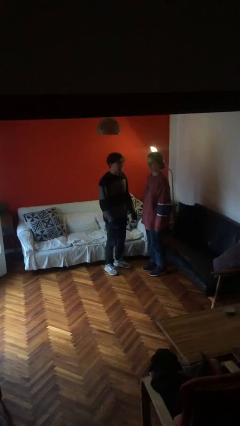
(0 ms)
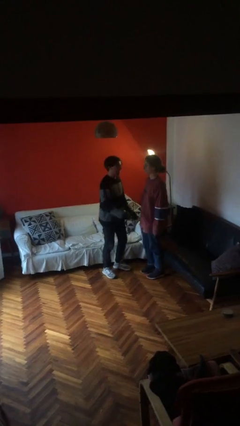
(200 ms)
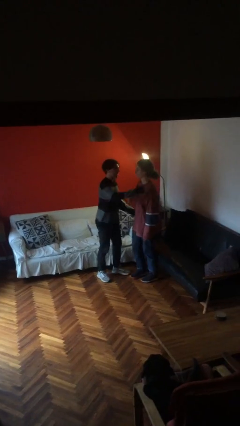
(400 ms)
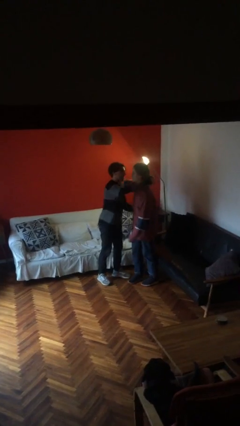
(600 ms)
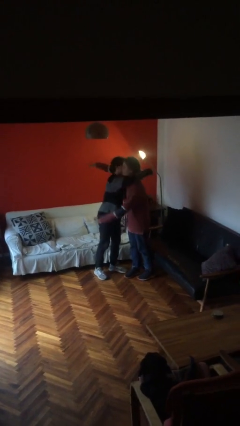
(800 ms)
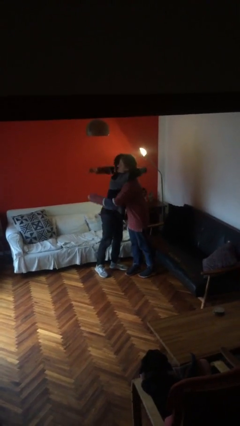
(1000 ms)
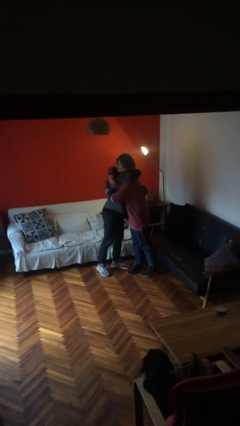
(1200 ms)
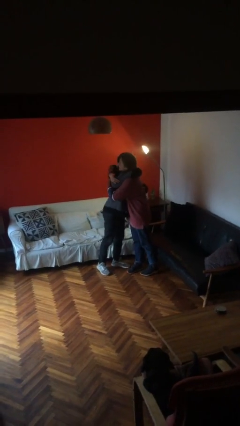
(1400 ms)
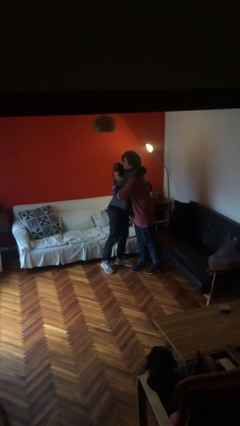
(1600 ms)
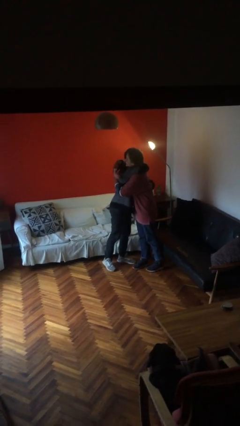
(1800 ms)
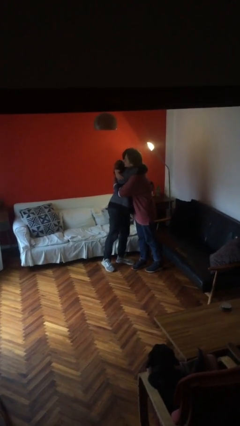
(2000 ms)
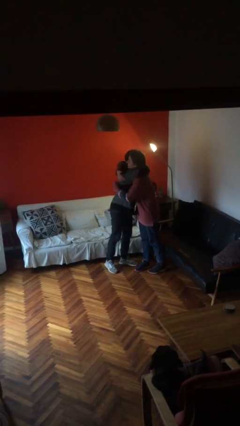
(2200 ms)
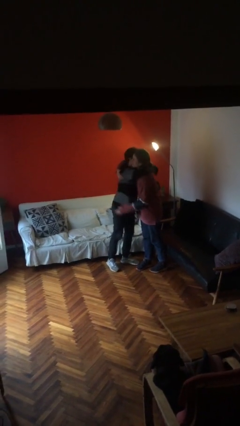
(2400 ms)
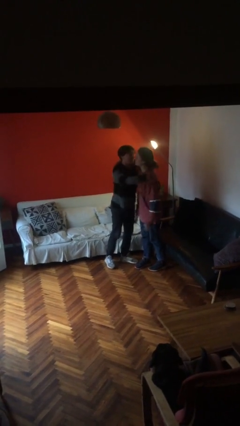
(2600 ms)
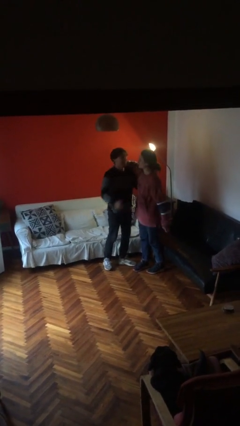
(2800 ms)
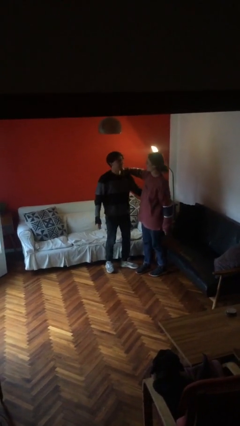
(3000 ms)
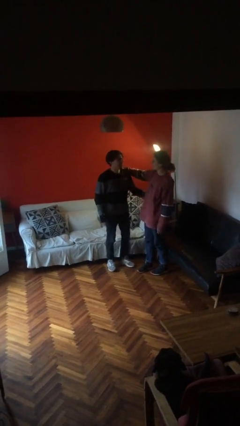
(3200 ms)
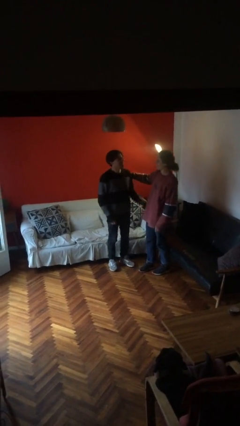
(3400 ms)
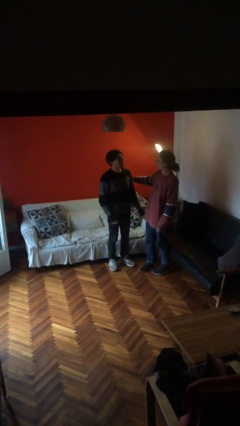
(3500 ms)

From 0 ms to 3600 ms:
person embraces person

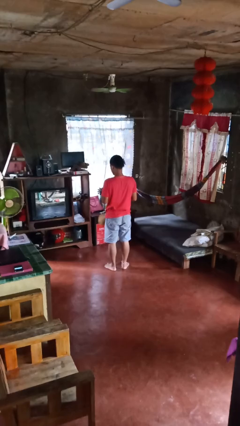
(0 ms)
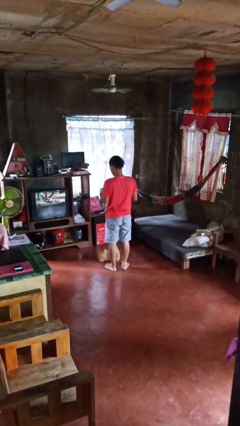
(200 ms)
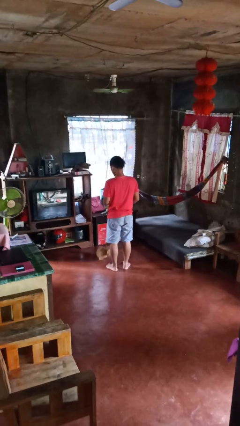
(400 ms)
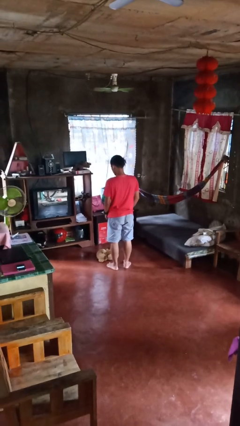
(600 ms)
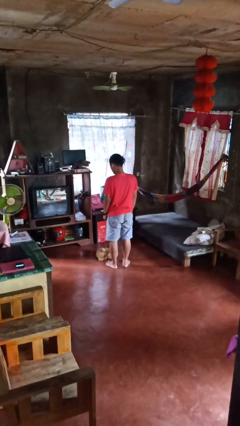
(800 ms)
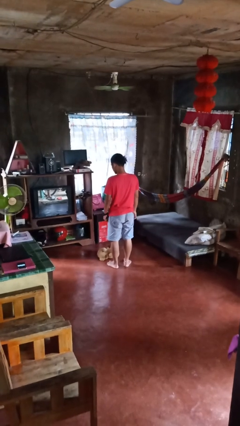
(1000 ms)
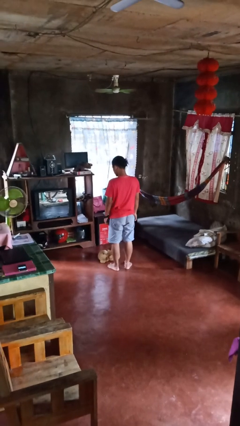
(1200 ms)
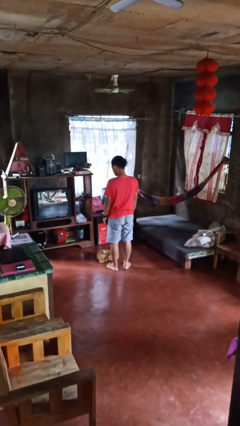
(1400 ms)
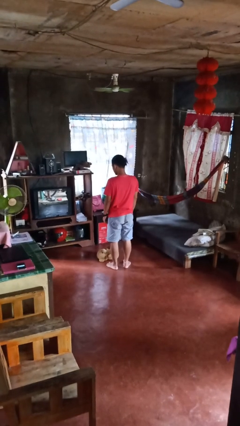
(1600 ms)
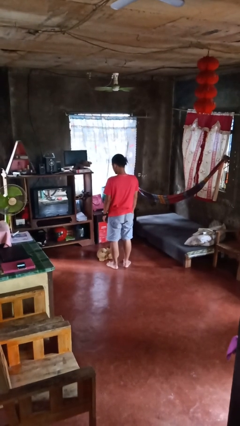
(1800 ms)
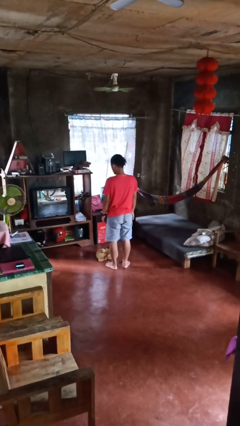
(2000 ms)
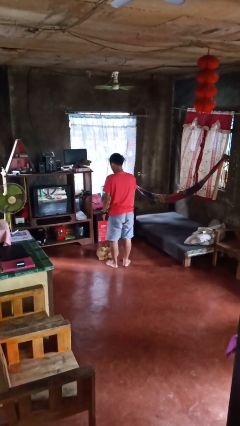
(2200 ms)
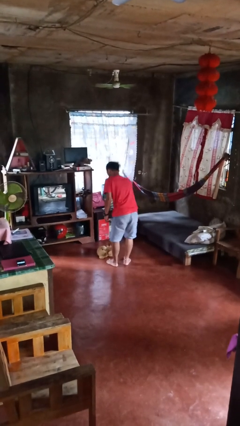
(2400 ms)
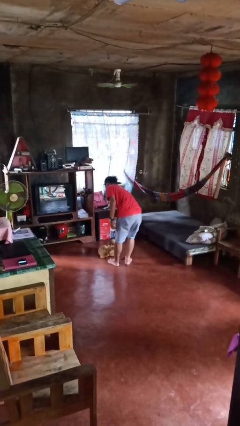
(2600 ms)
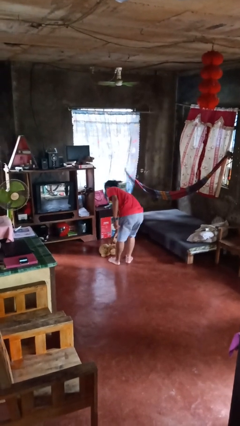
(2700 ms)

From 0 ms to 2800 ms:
person drops object

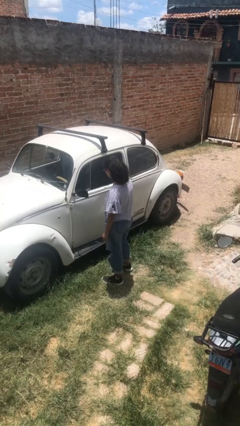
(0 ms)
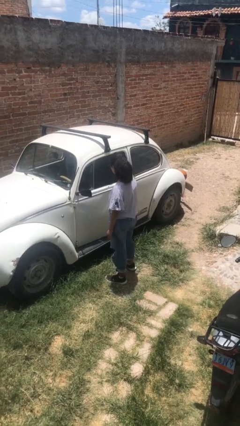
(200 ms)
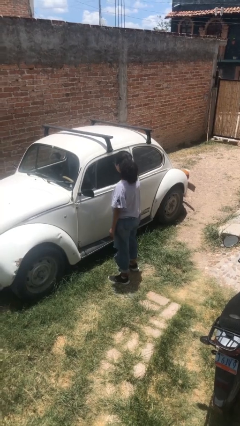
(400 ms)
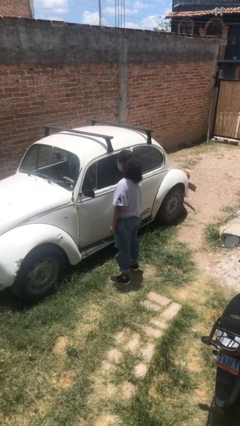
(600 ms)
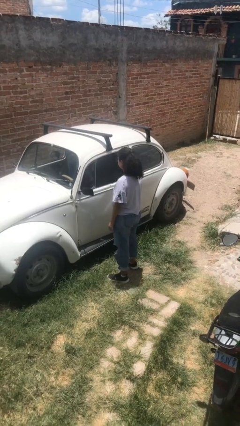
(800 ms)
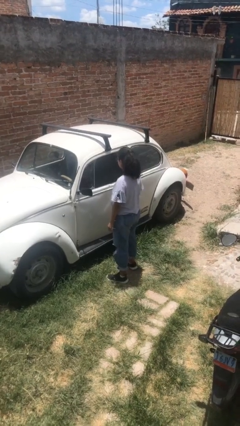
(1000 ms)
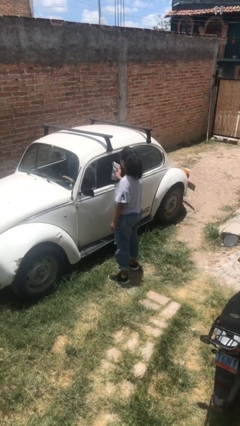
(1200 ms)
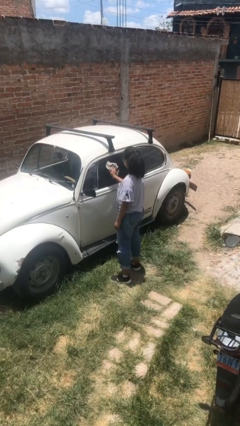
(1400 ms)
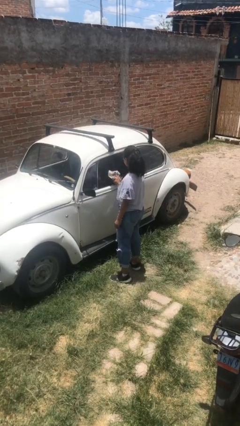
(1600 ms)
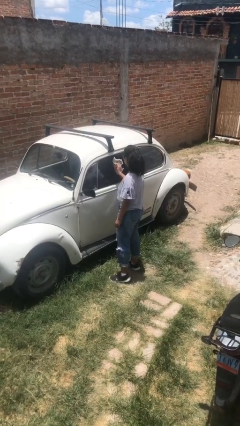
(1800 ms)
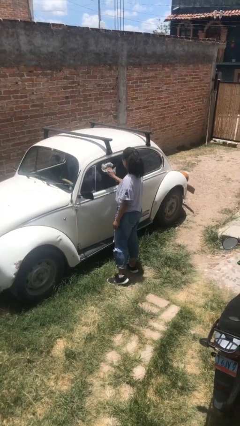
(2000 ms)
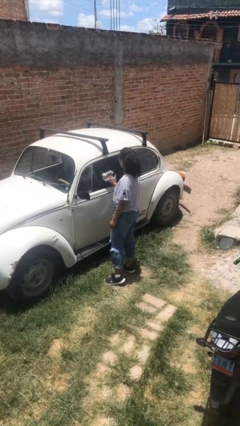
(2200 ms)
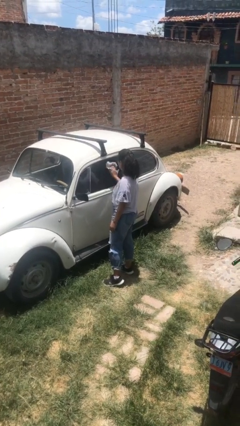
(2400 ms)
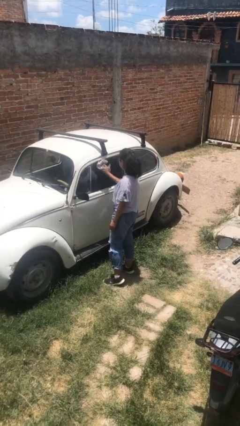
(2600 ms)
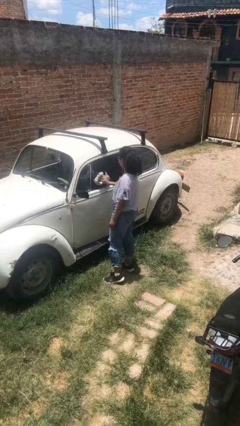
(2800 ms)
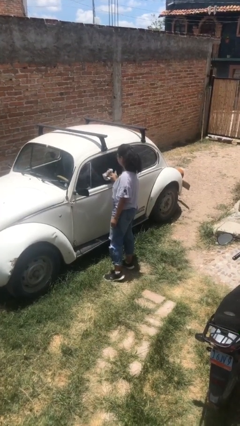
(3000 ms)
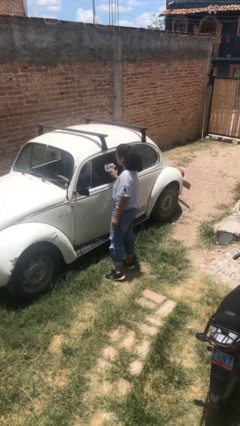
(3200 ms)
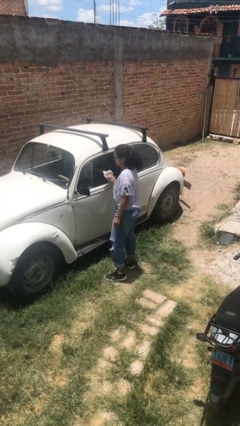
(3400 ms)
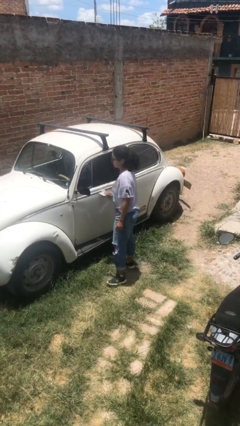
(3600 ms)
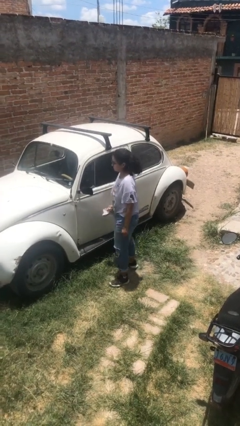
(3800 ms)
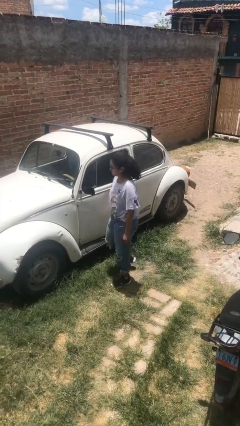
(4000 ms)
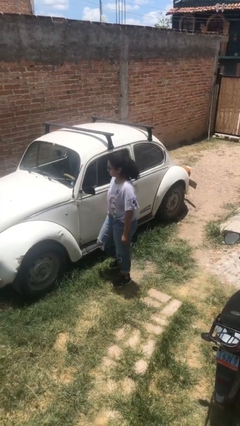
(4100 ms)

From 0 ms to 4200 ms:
person polishes car with rag

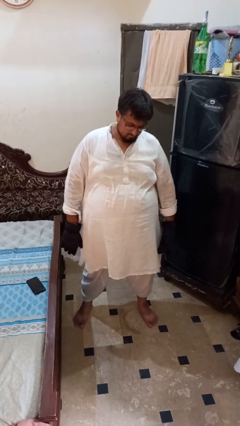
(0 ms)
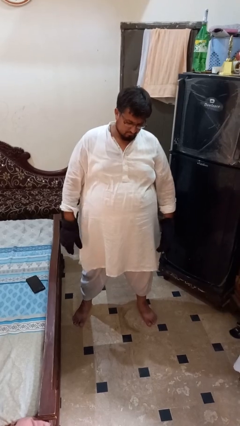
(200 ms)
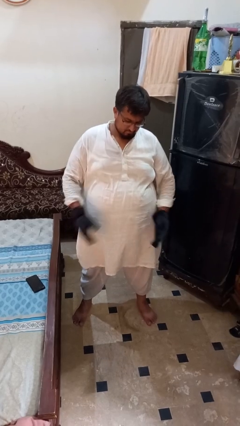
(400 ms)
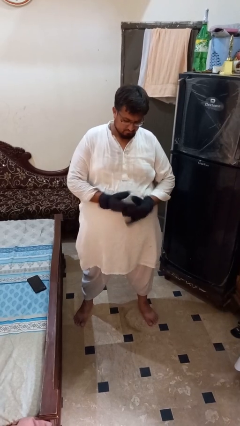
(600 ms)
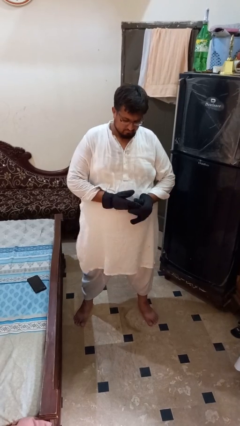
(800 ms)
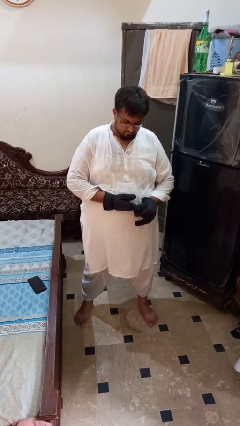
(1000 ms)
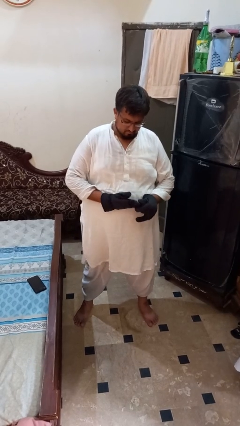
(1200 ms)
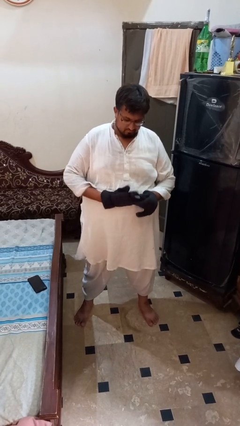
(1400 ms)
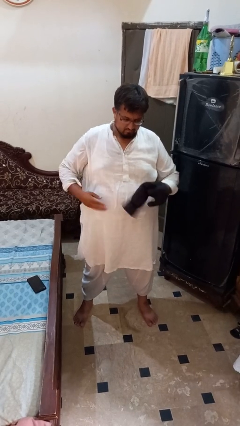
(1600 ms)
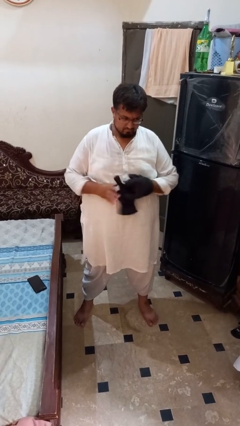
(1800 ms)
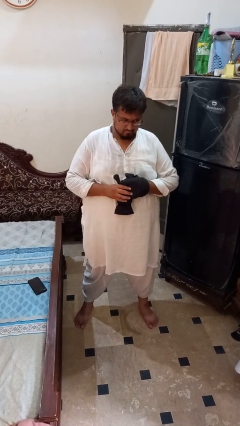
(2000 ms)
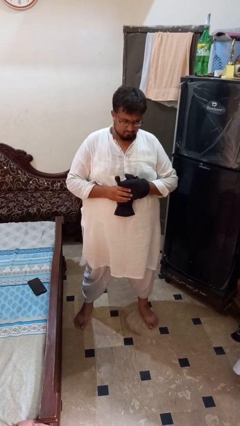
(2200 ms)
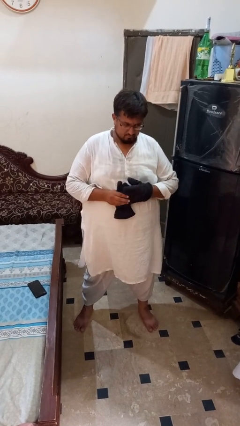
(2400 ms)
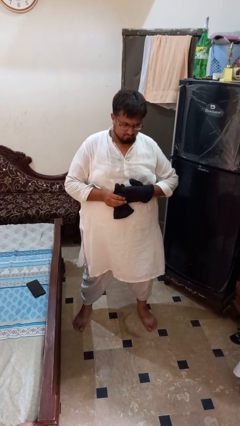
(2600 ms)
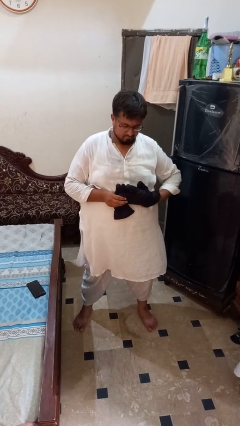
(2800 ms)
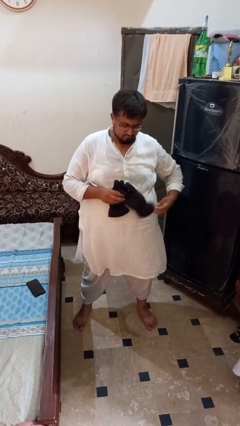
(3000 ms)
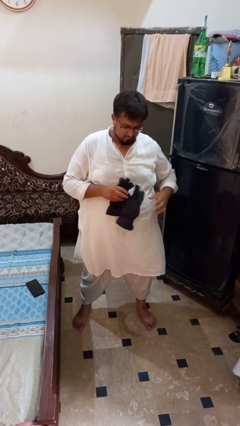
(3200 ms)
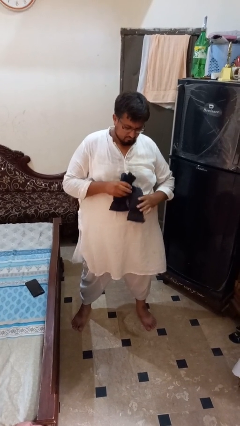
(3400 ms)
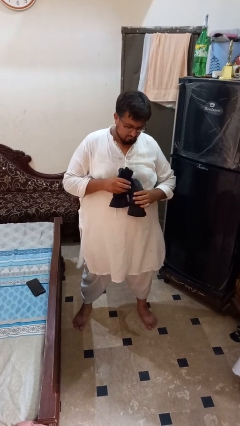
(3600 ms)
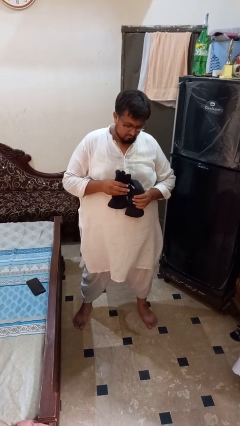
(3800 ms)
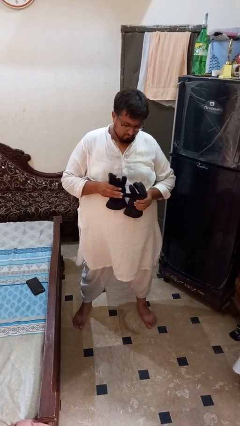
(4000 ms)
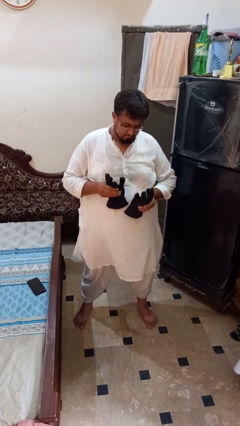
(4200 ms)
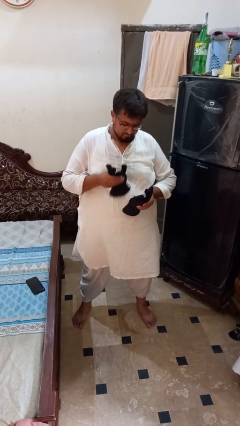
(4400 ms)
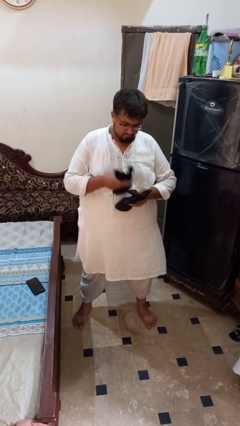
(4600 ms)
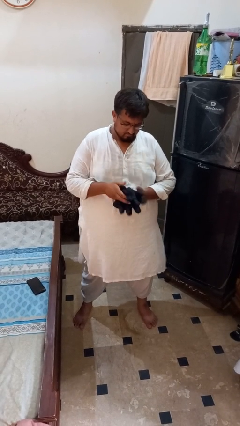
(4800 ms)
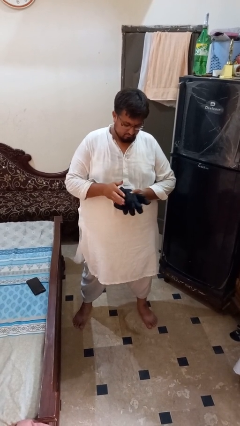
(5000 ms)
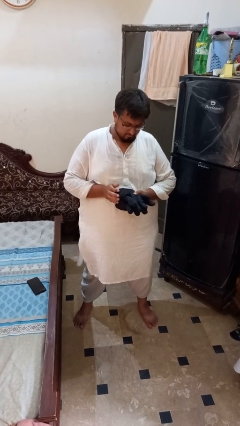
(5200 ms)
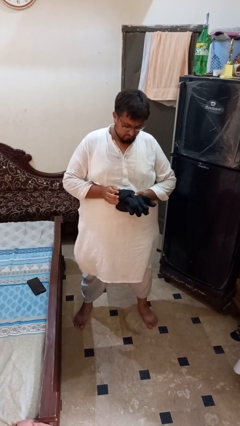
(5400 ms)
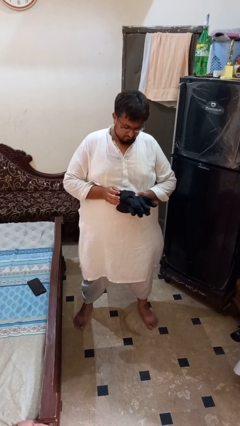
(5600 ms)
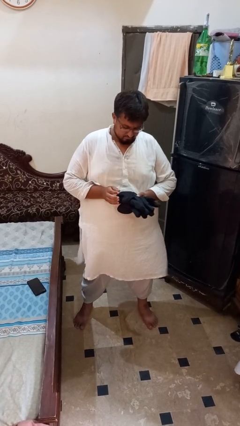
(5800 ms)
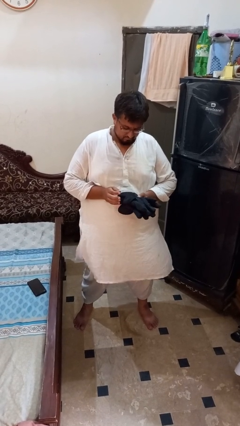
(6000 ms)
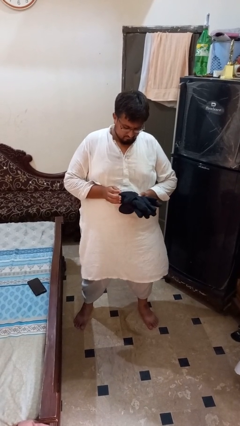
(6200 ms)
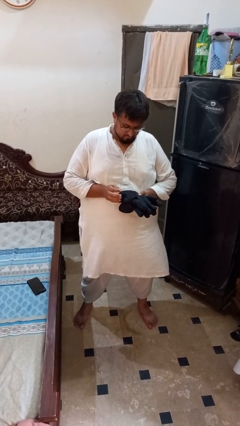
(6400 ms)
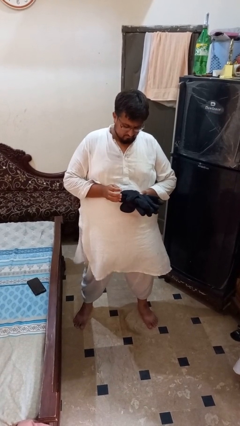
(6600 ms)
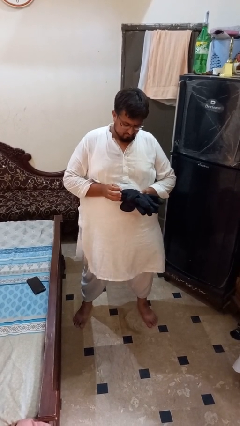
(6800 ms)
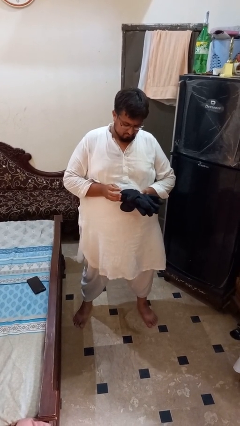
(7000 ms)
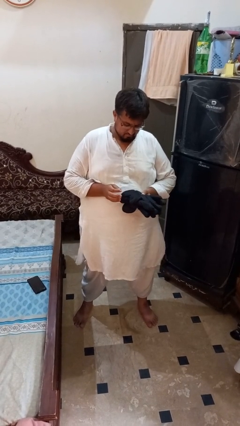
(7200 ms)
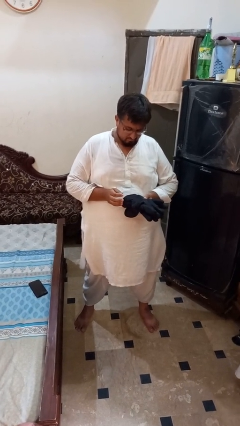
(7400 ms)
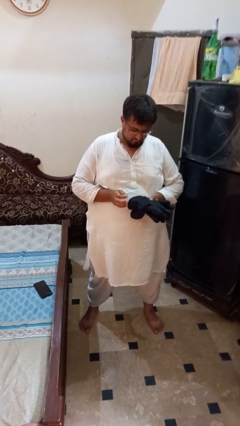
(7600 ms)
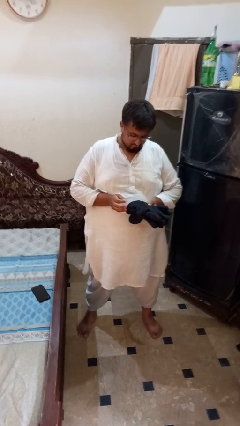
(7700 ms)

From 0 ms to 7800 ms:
person takes off gloves
